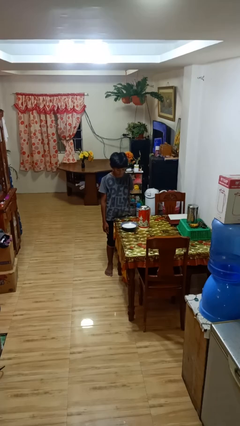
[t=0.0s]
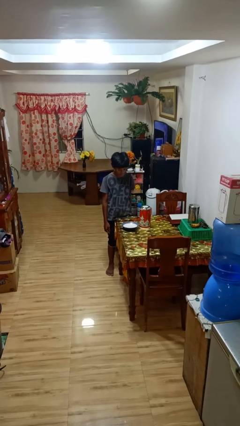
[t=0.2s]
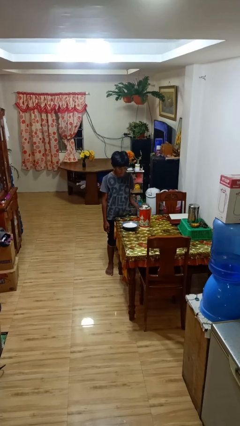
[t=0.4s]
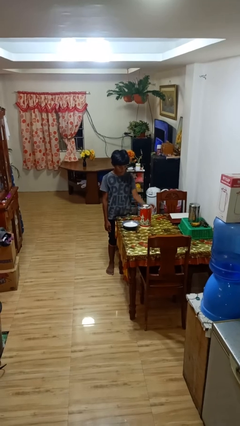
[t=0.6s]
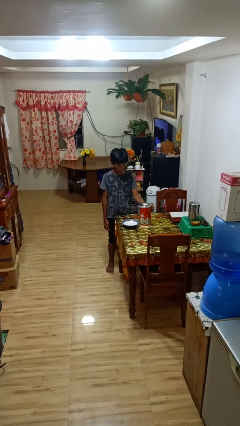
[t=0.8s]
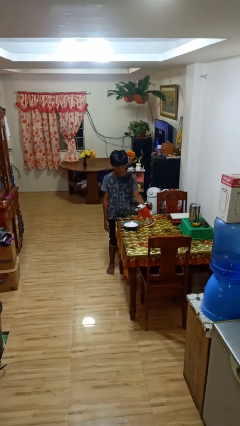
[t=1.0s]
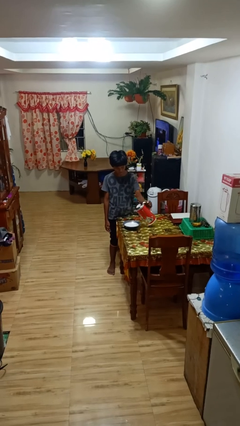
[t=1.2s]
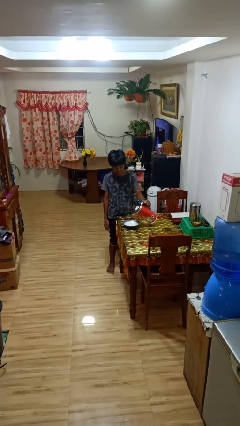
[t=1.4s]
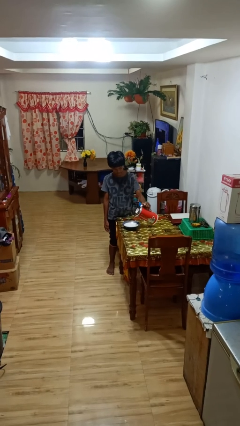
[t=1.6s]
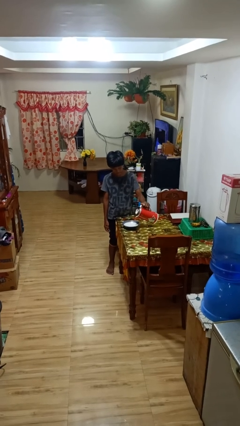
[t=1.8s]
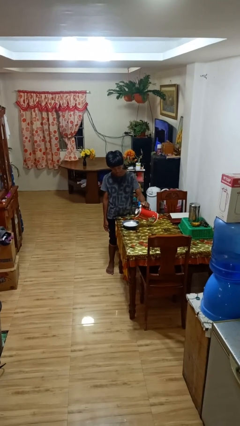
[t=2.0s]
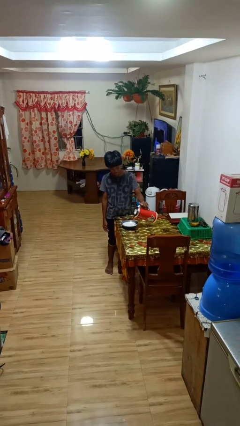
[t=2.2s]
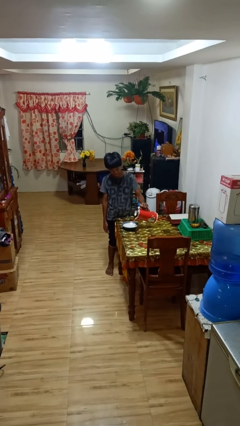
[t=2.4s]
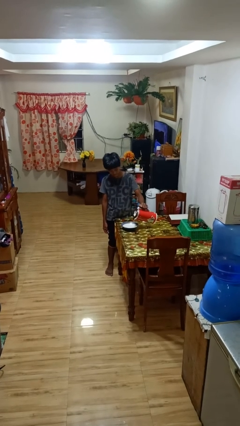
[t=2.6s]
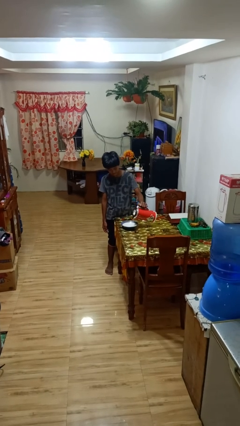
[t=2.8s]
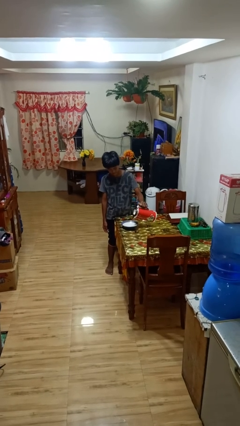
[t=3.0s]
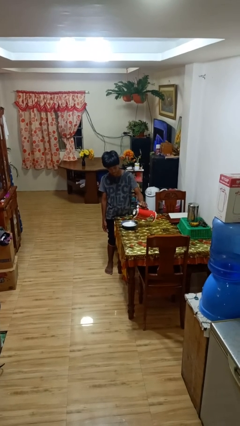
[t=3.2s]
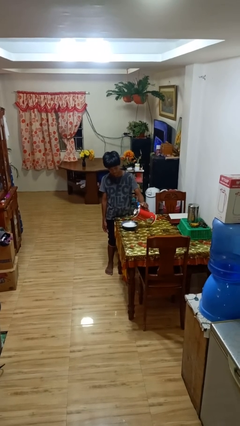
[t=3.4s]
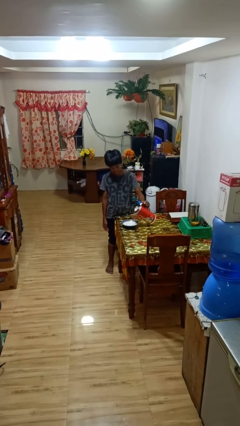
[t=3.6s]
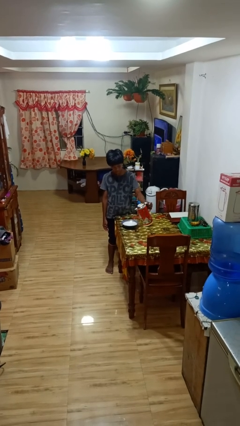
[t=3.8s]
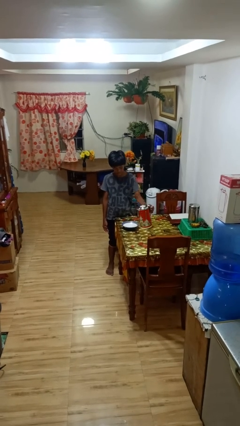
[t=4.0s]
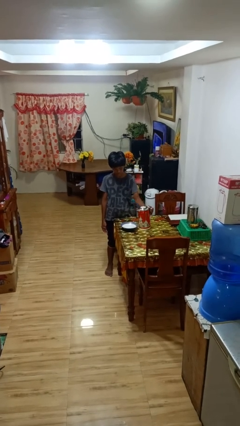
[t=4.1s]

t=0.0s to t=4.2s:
person pours into bowl

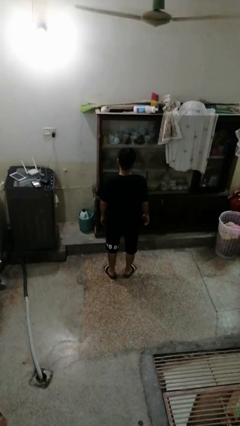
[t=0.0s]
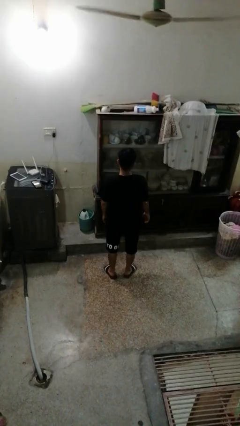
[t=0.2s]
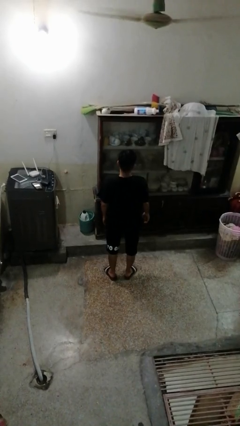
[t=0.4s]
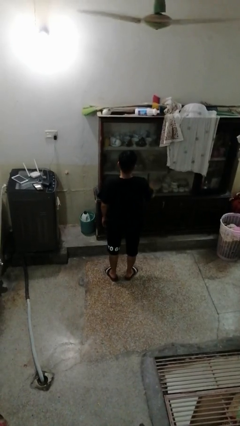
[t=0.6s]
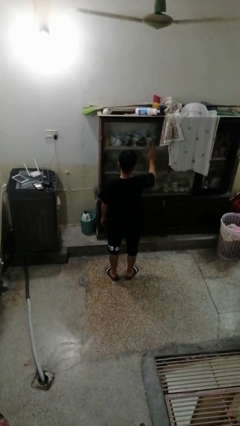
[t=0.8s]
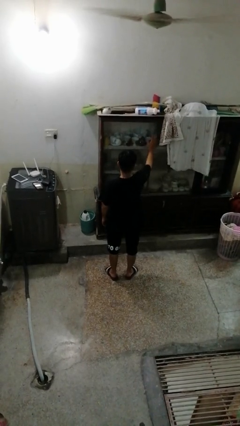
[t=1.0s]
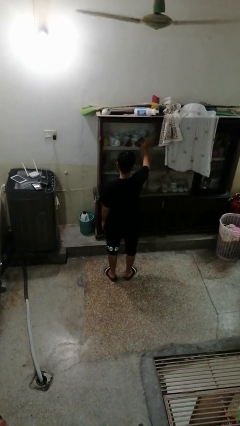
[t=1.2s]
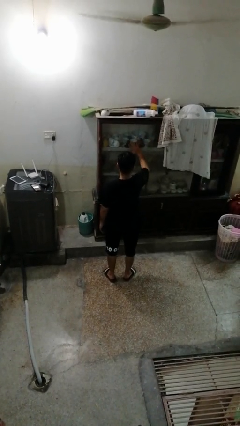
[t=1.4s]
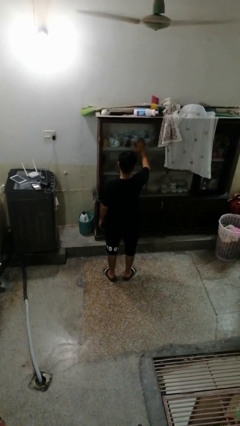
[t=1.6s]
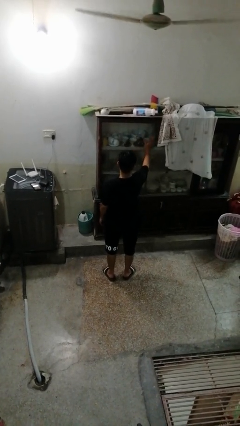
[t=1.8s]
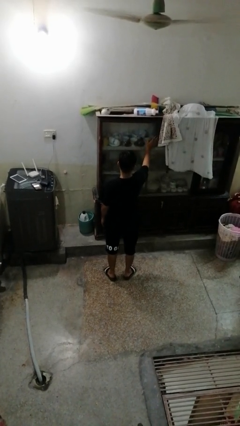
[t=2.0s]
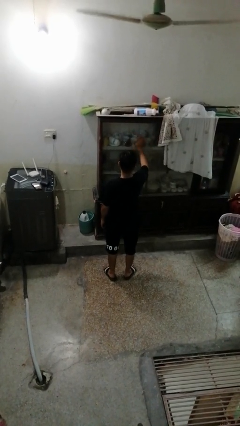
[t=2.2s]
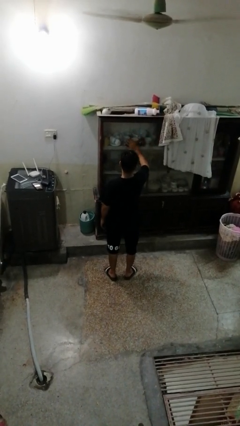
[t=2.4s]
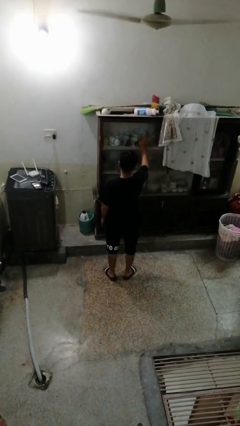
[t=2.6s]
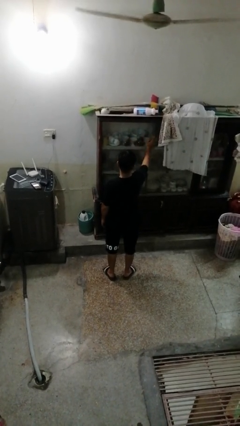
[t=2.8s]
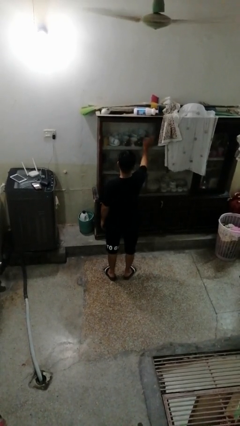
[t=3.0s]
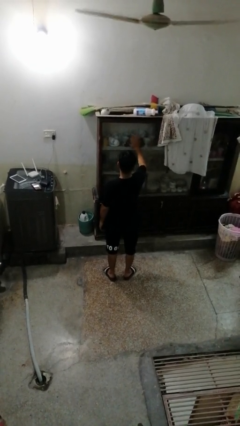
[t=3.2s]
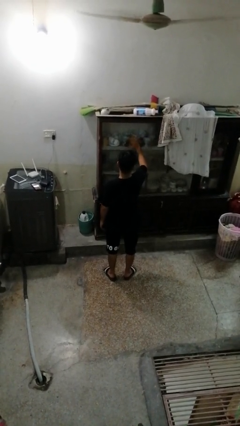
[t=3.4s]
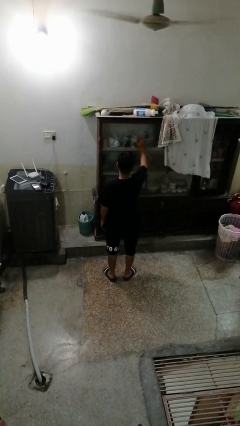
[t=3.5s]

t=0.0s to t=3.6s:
person waves hand over object

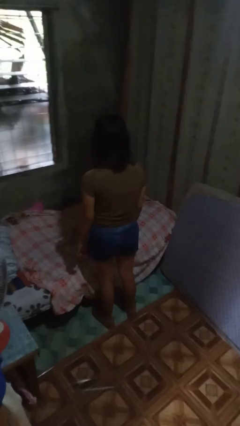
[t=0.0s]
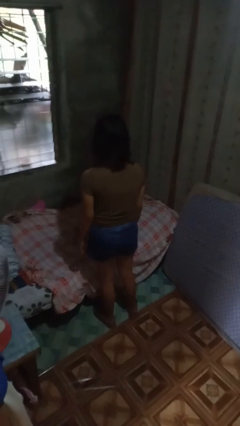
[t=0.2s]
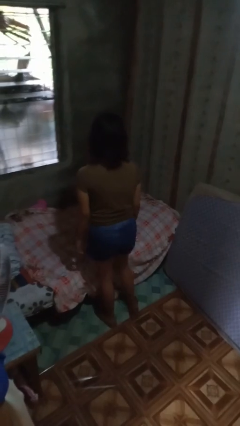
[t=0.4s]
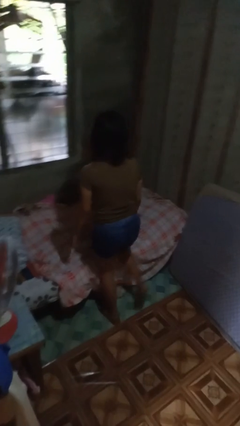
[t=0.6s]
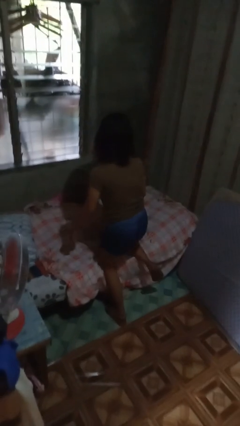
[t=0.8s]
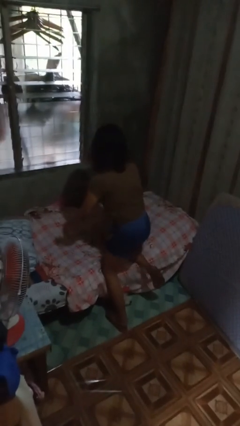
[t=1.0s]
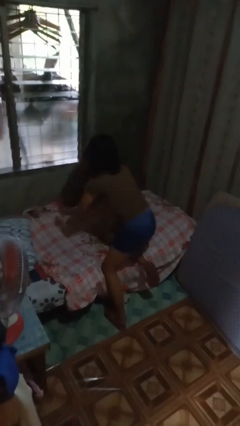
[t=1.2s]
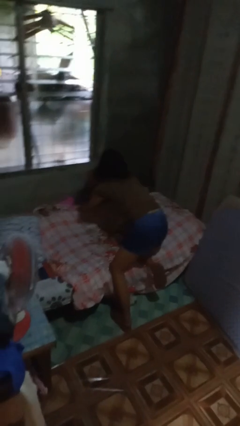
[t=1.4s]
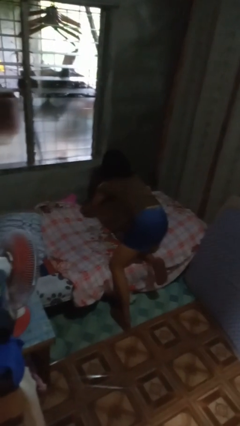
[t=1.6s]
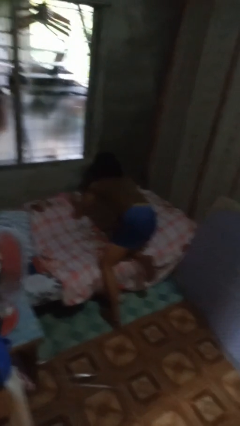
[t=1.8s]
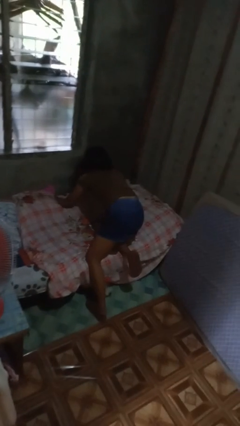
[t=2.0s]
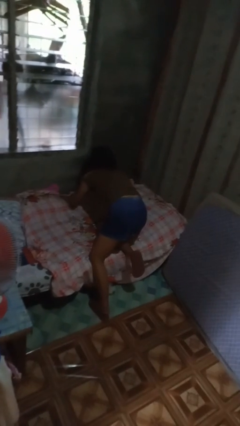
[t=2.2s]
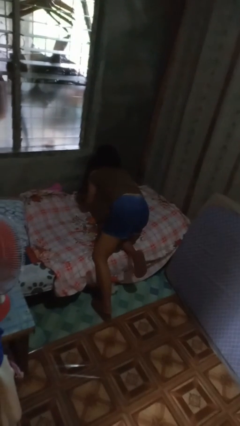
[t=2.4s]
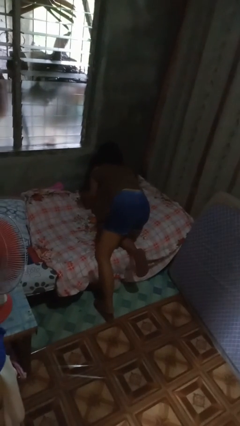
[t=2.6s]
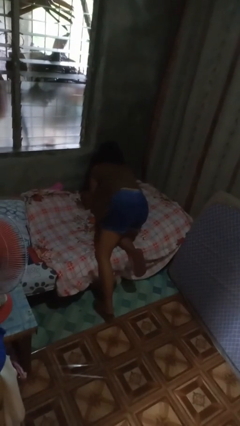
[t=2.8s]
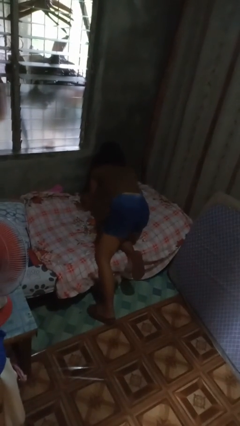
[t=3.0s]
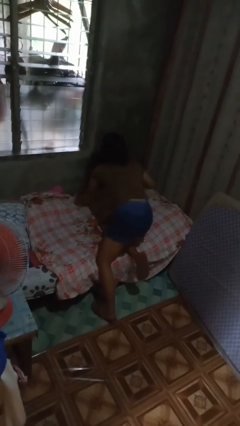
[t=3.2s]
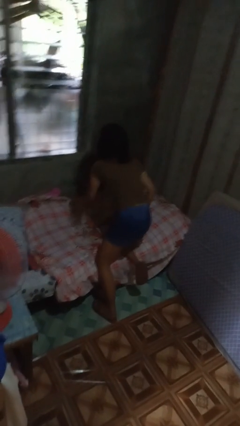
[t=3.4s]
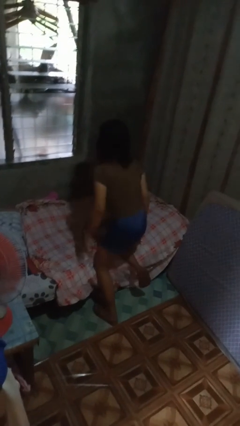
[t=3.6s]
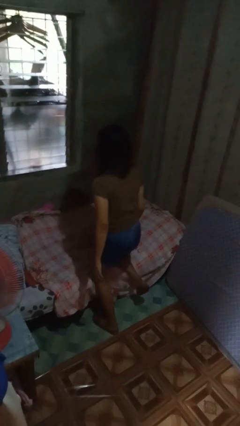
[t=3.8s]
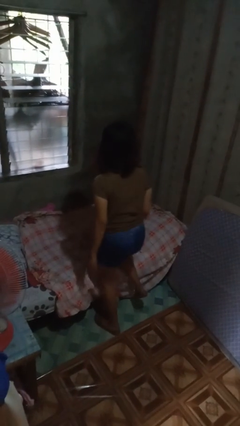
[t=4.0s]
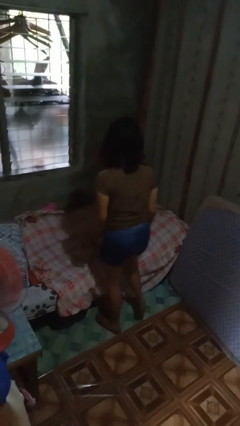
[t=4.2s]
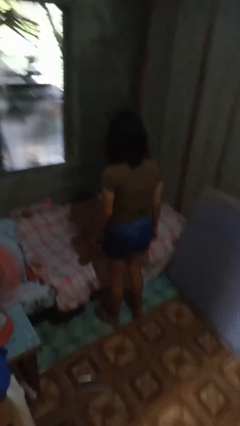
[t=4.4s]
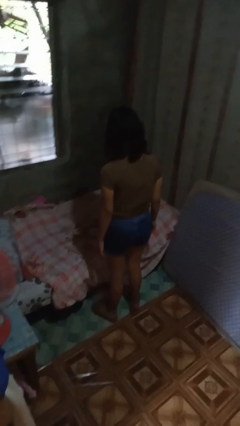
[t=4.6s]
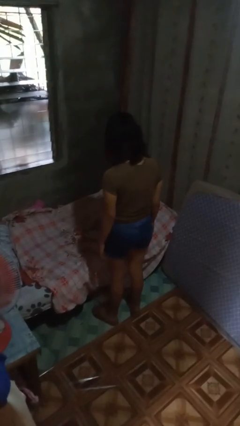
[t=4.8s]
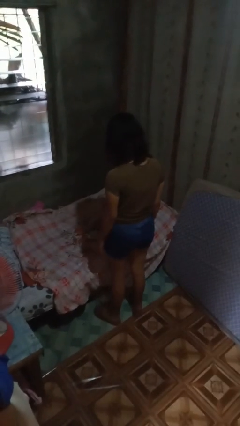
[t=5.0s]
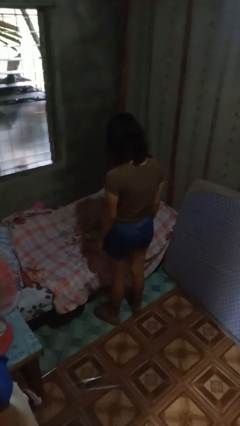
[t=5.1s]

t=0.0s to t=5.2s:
person makes bed

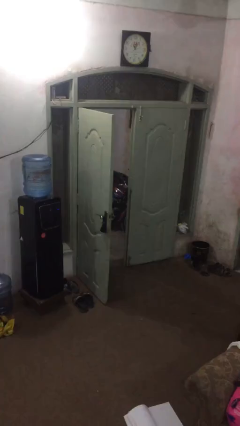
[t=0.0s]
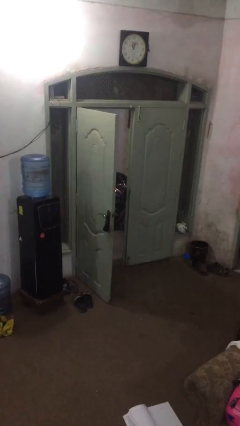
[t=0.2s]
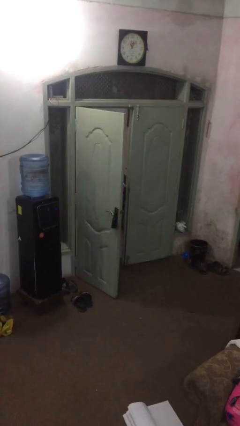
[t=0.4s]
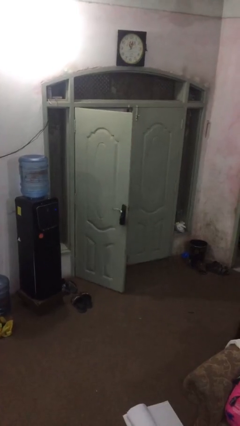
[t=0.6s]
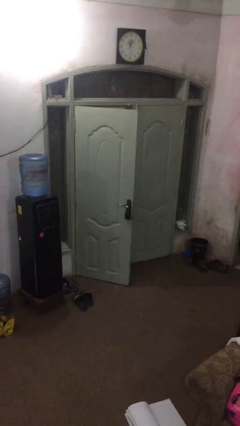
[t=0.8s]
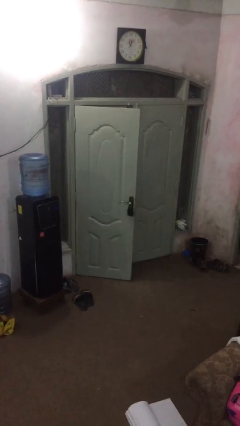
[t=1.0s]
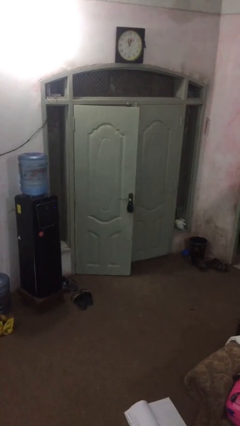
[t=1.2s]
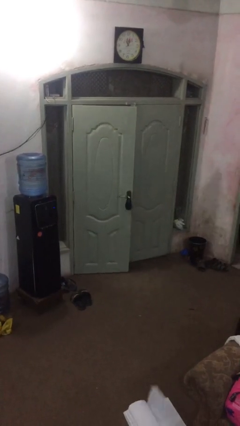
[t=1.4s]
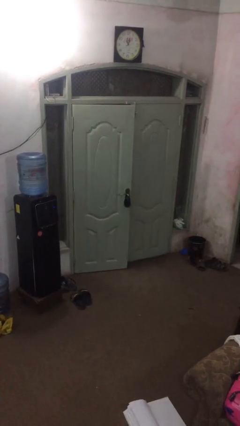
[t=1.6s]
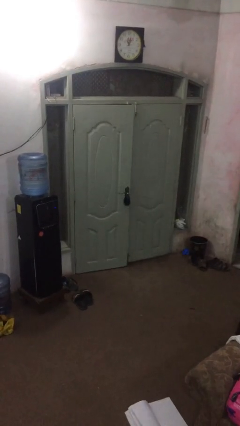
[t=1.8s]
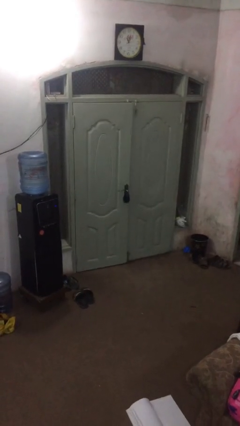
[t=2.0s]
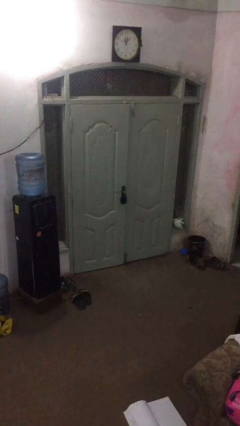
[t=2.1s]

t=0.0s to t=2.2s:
person closes facility door

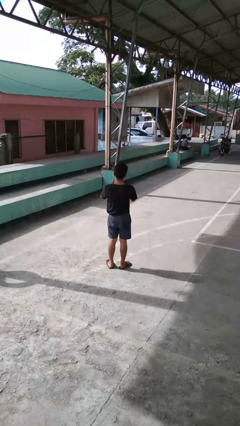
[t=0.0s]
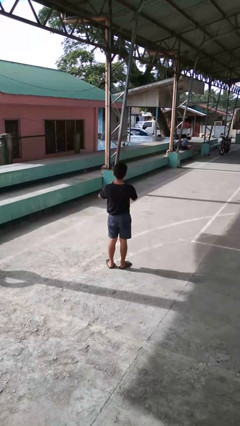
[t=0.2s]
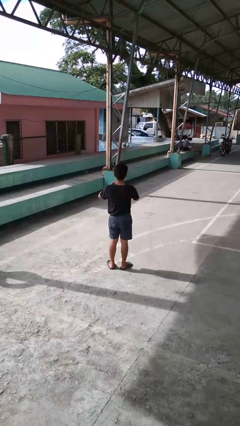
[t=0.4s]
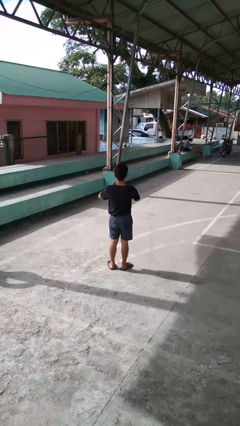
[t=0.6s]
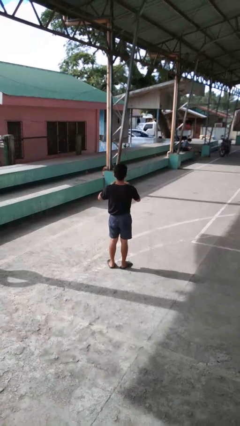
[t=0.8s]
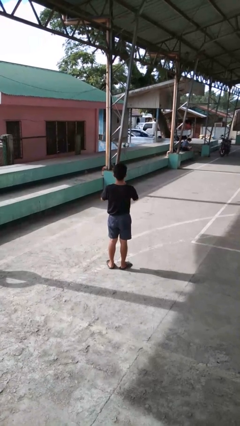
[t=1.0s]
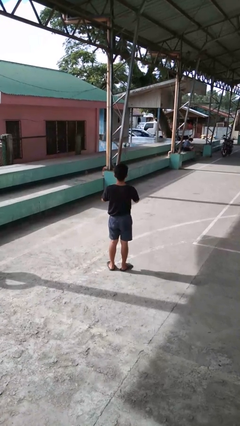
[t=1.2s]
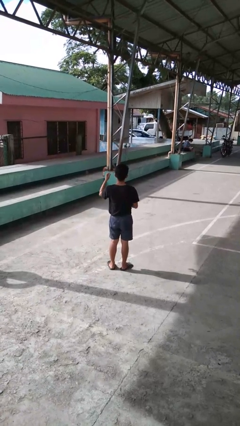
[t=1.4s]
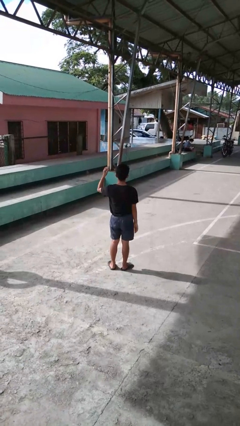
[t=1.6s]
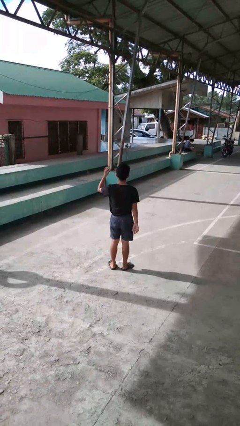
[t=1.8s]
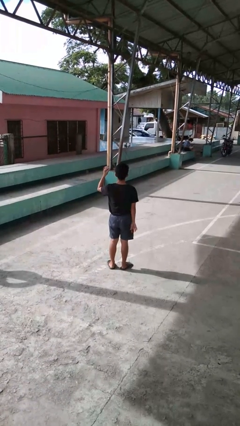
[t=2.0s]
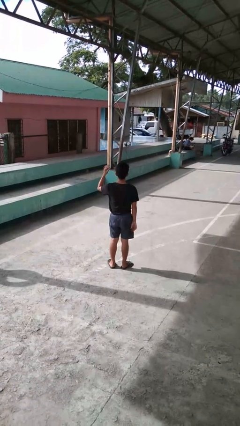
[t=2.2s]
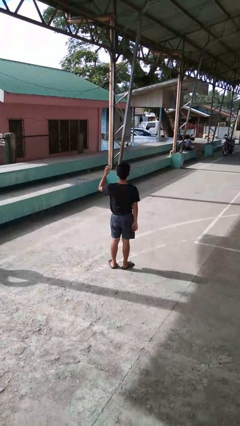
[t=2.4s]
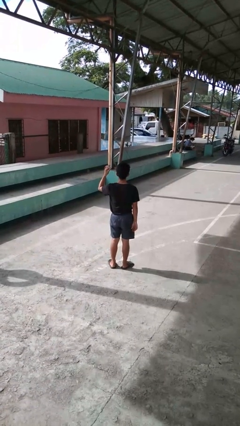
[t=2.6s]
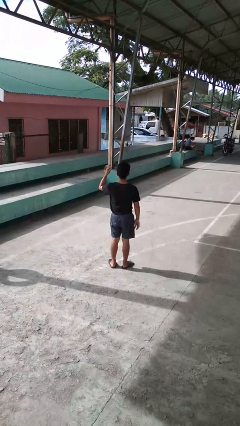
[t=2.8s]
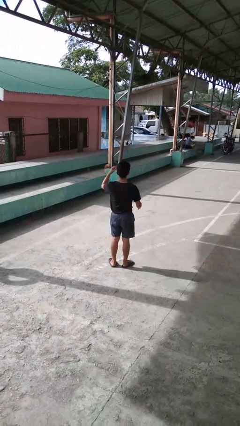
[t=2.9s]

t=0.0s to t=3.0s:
person takes off ring
